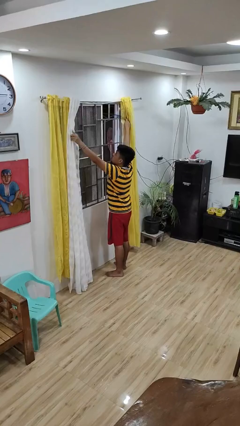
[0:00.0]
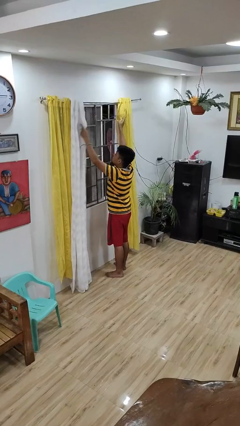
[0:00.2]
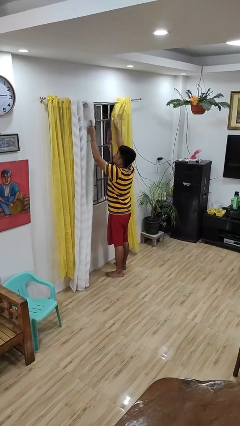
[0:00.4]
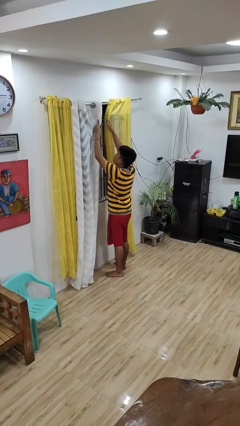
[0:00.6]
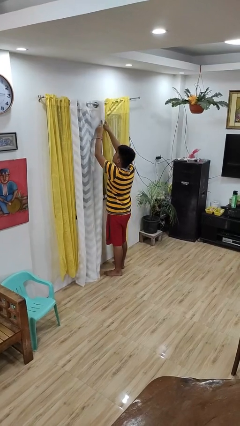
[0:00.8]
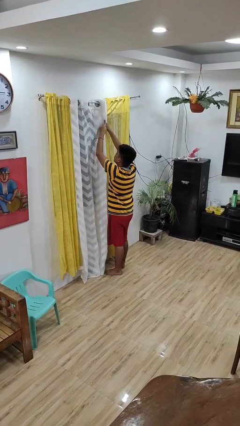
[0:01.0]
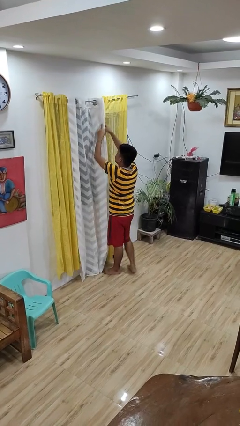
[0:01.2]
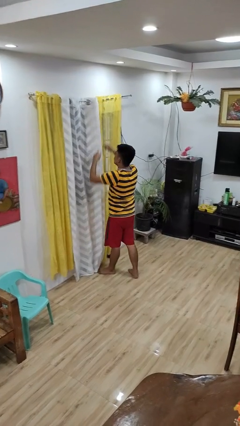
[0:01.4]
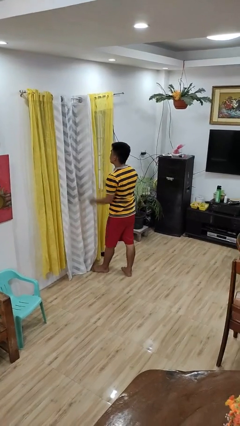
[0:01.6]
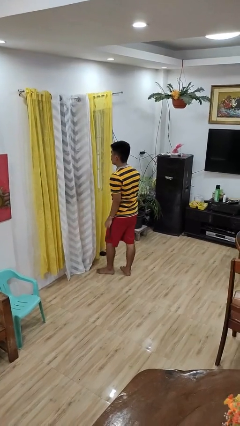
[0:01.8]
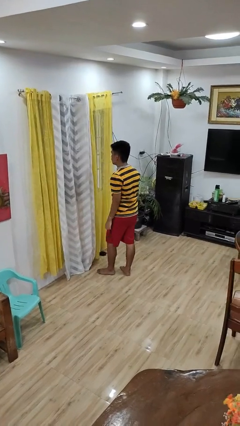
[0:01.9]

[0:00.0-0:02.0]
person closes curtains

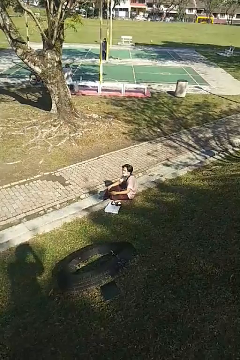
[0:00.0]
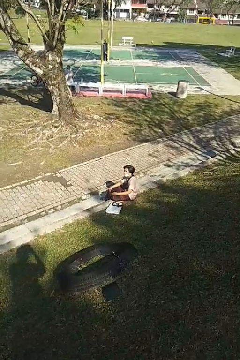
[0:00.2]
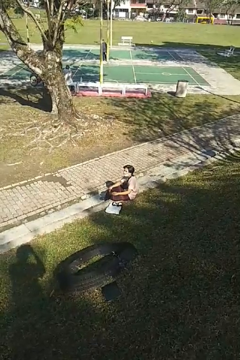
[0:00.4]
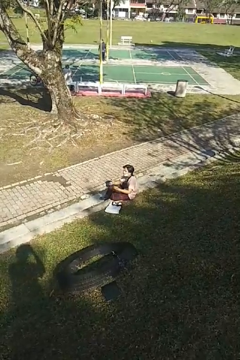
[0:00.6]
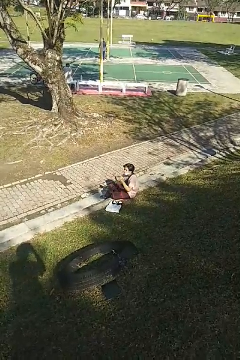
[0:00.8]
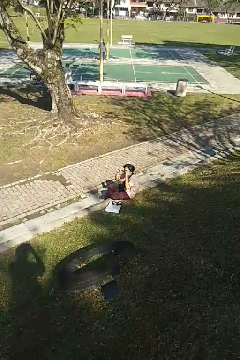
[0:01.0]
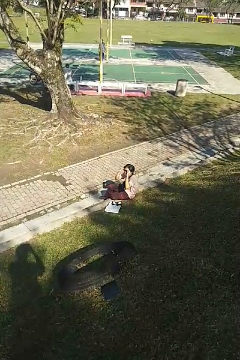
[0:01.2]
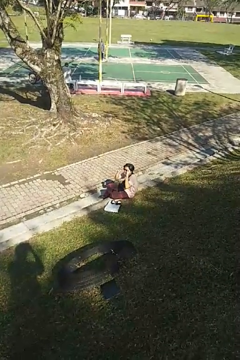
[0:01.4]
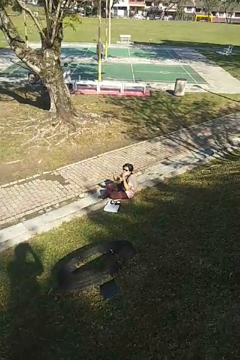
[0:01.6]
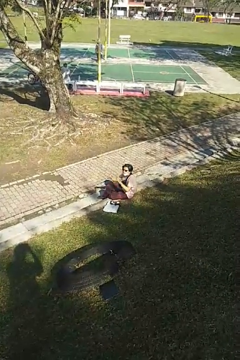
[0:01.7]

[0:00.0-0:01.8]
person puts on sunglasses

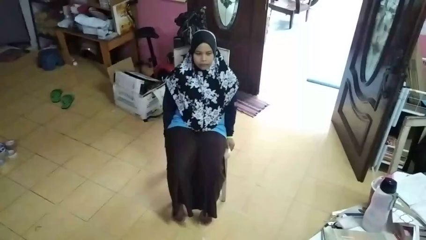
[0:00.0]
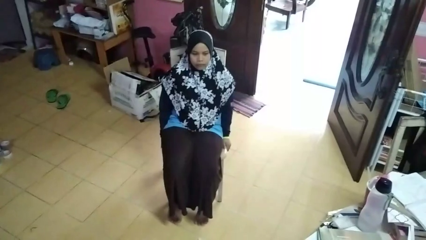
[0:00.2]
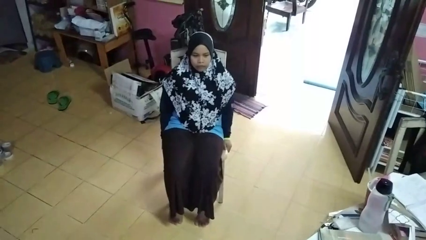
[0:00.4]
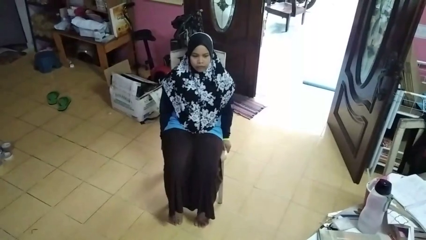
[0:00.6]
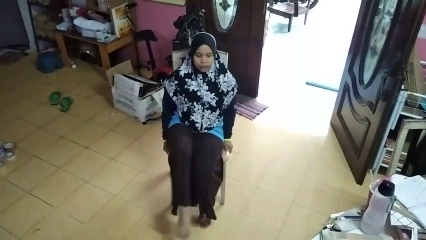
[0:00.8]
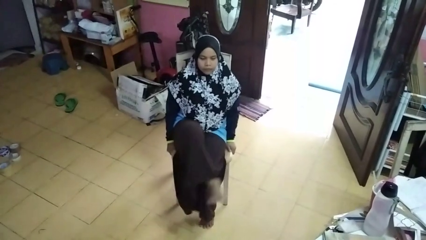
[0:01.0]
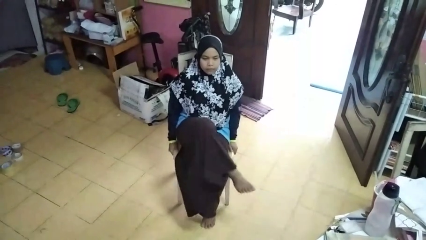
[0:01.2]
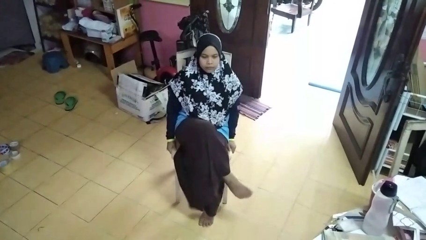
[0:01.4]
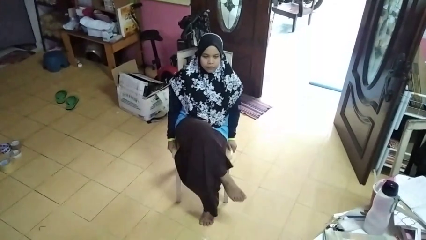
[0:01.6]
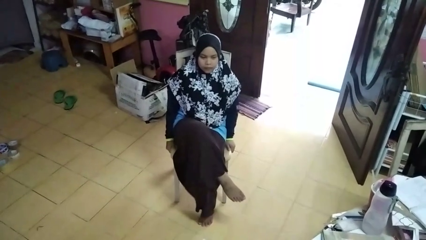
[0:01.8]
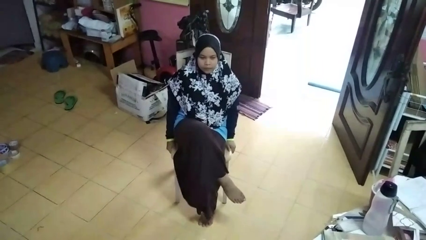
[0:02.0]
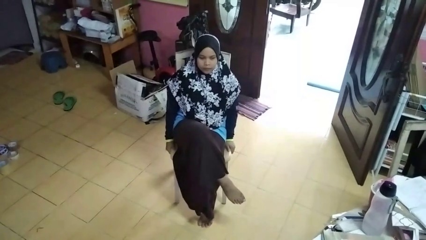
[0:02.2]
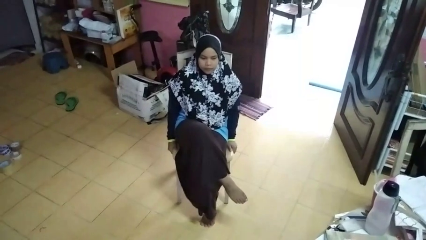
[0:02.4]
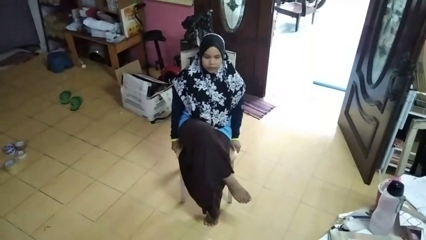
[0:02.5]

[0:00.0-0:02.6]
person crosses legs

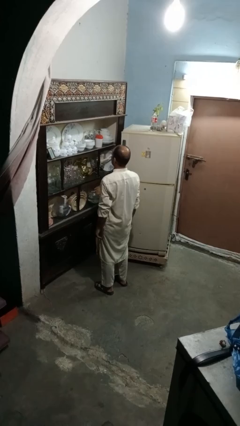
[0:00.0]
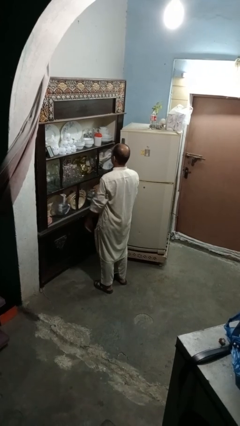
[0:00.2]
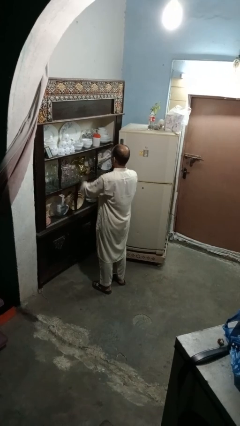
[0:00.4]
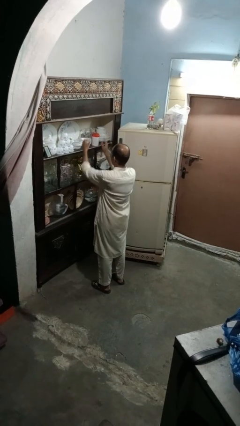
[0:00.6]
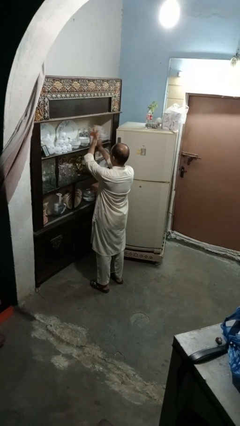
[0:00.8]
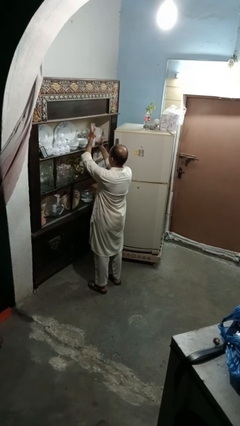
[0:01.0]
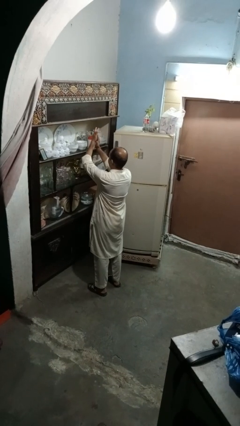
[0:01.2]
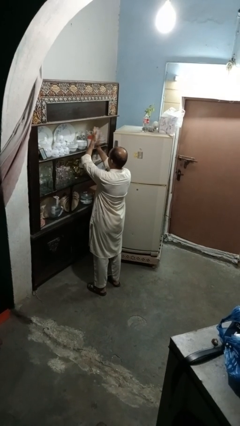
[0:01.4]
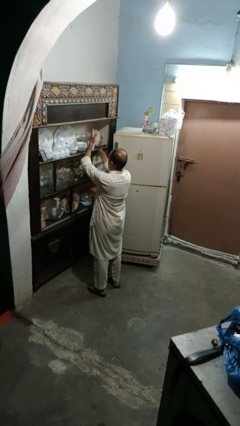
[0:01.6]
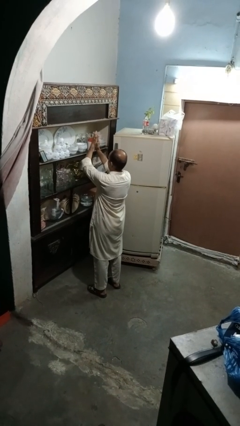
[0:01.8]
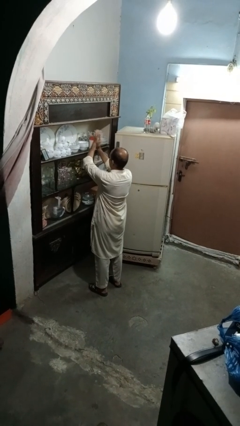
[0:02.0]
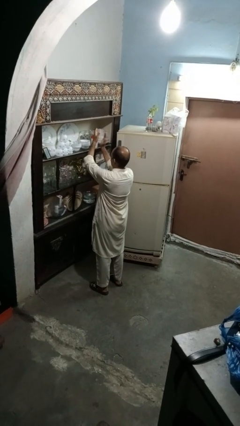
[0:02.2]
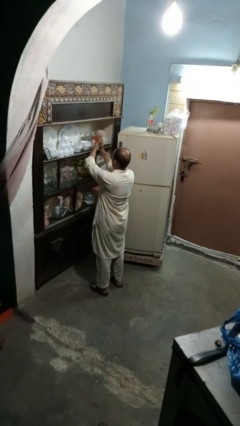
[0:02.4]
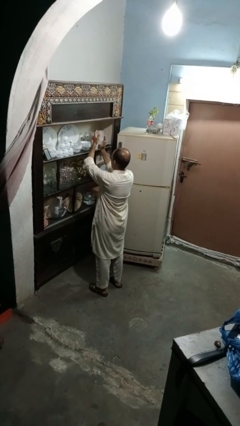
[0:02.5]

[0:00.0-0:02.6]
person claps hands

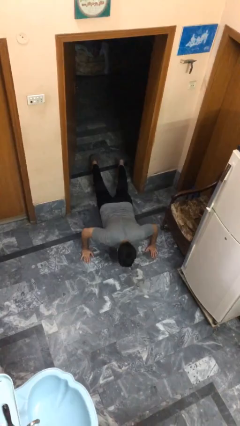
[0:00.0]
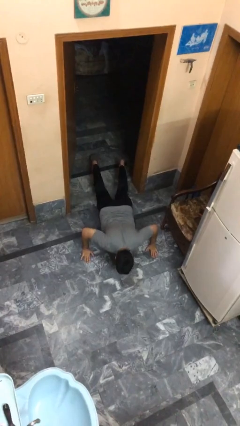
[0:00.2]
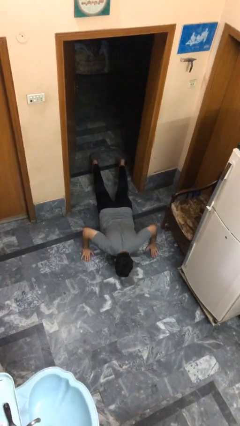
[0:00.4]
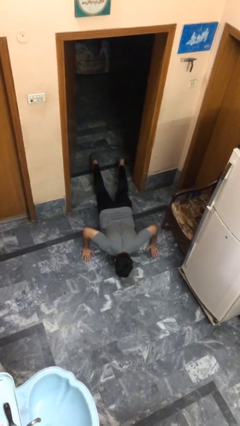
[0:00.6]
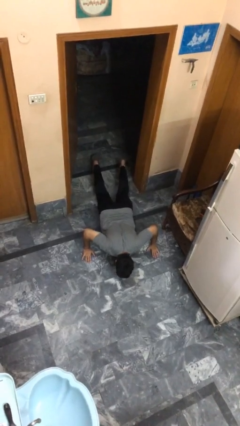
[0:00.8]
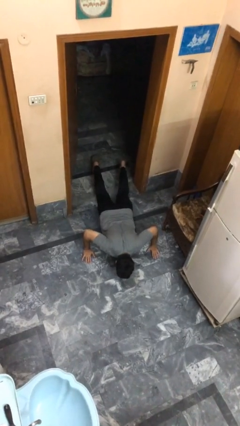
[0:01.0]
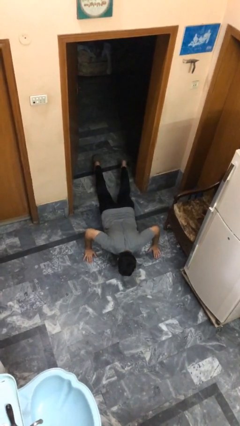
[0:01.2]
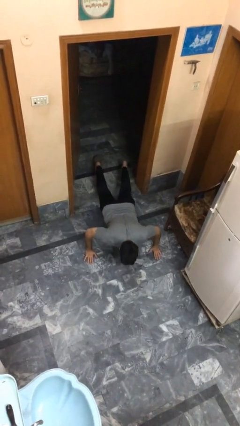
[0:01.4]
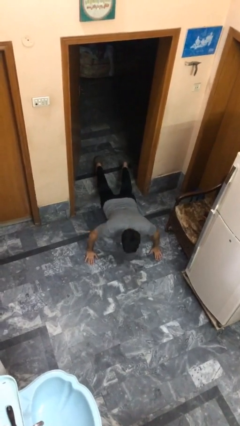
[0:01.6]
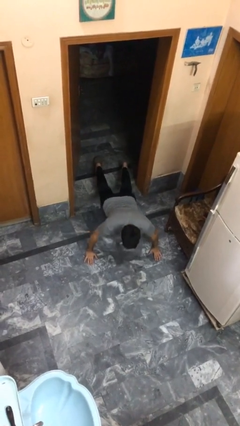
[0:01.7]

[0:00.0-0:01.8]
person exercises with pushup

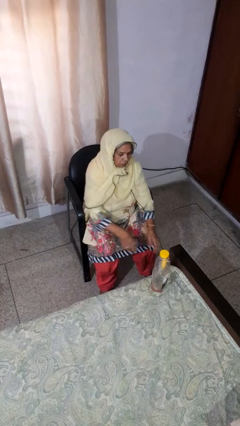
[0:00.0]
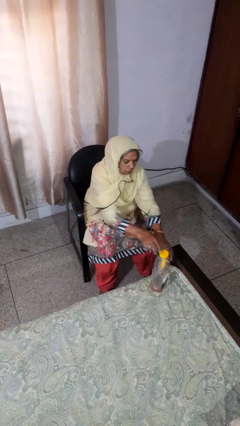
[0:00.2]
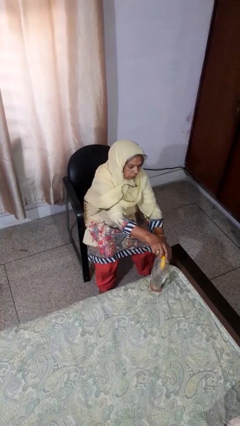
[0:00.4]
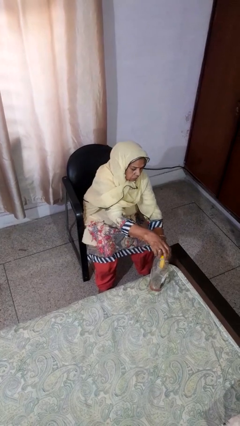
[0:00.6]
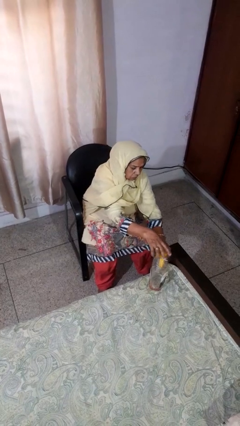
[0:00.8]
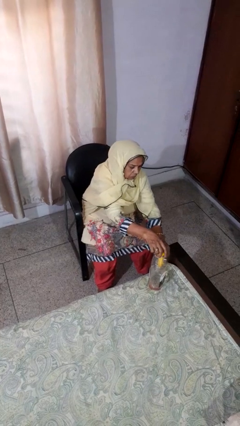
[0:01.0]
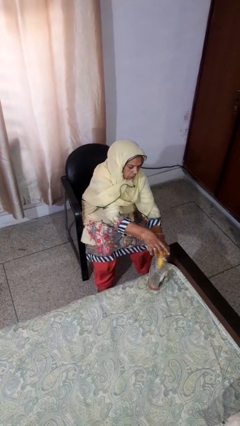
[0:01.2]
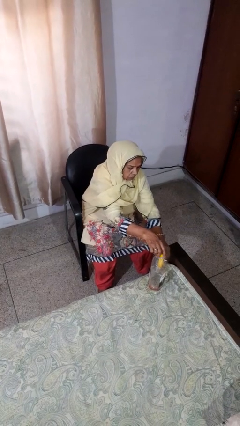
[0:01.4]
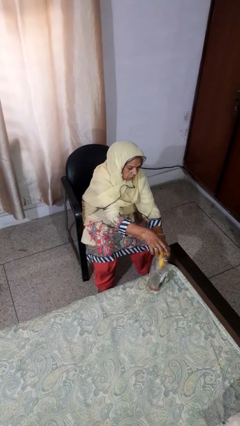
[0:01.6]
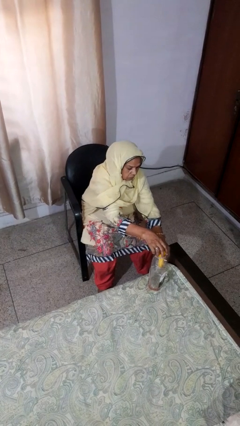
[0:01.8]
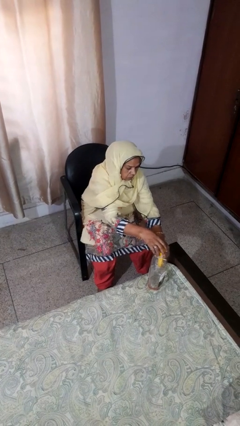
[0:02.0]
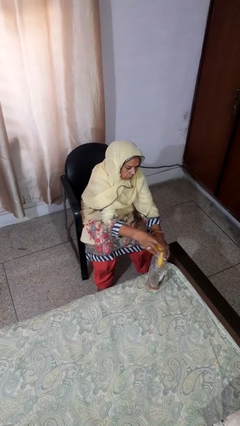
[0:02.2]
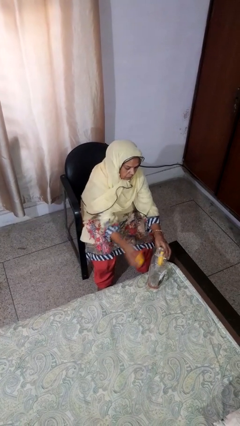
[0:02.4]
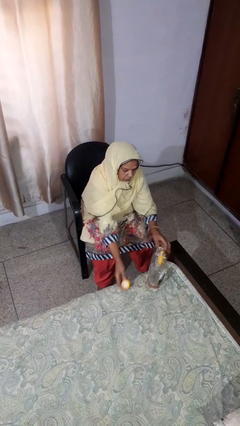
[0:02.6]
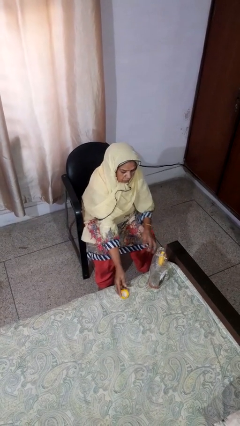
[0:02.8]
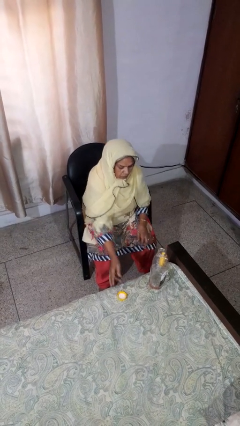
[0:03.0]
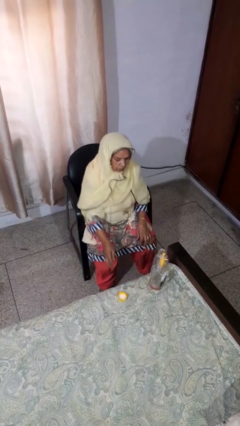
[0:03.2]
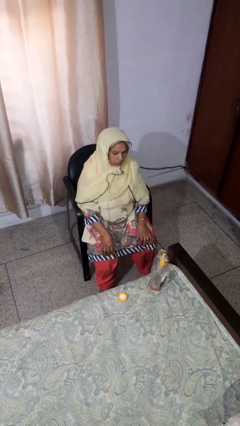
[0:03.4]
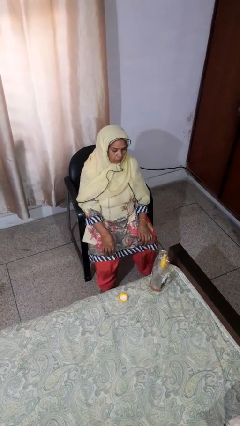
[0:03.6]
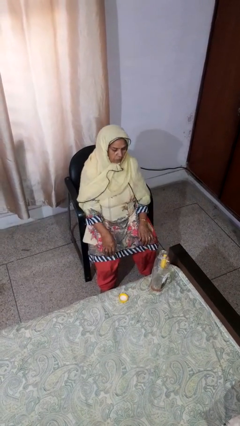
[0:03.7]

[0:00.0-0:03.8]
person unscrews lid from bottle

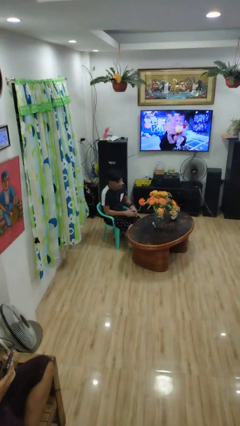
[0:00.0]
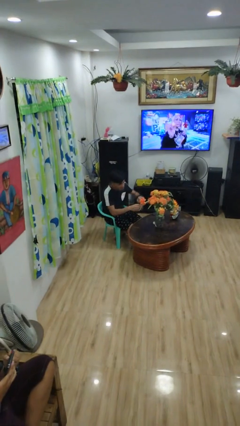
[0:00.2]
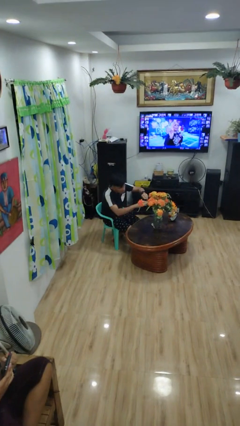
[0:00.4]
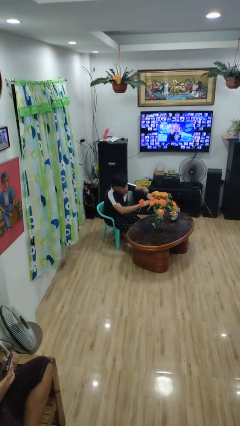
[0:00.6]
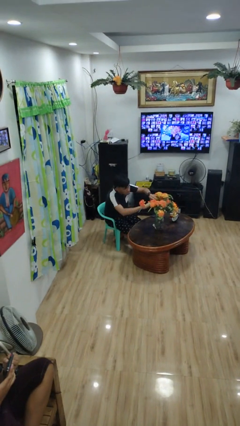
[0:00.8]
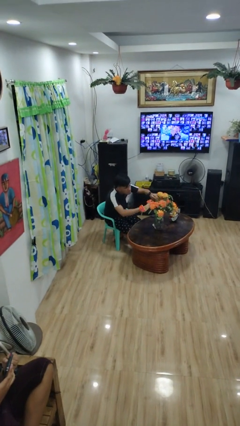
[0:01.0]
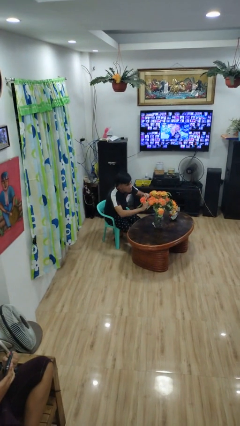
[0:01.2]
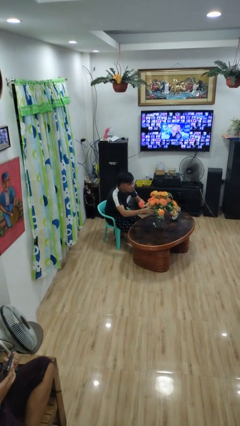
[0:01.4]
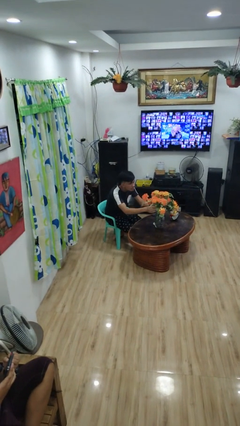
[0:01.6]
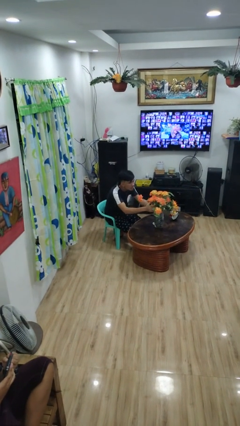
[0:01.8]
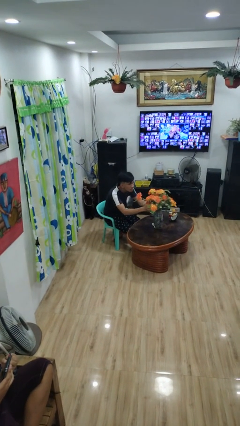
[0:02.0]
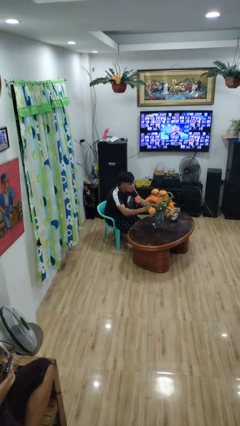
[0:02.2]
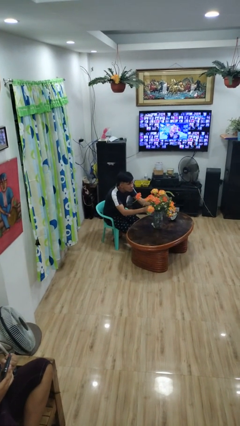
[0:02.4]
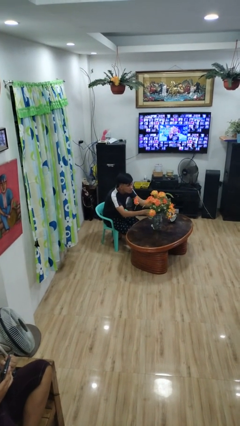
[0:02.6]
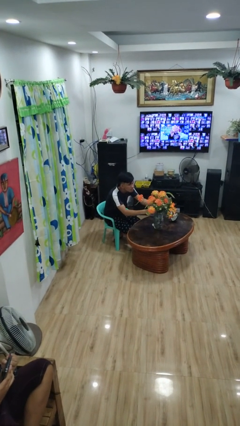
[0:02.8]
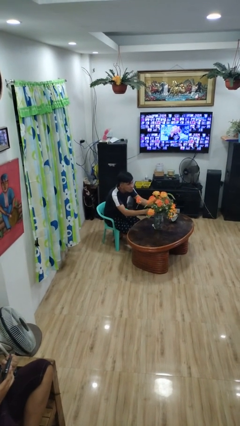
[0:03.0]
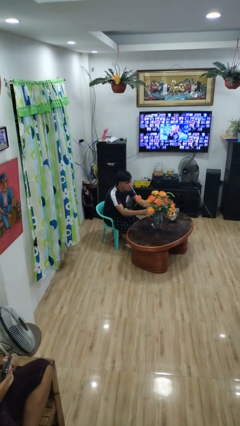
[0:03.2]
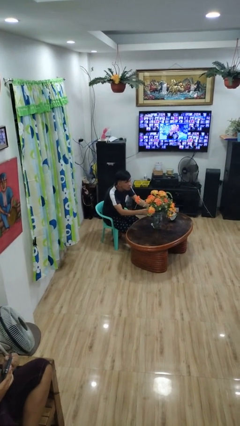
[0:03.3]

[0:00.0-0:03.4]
person arranges flowers in vase
